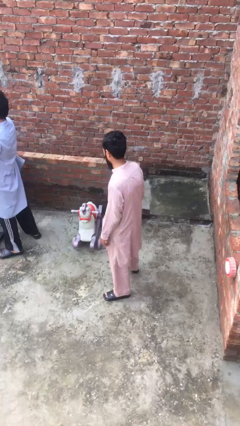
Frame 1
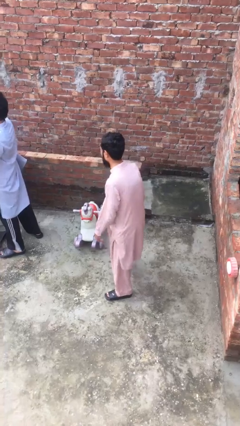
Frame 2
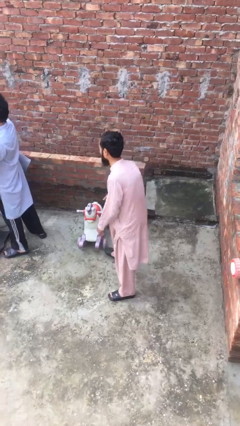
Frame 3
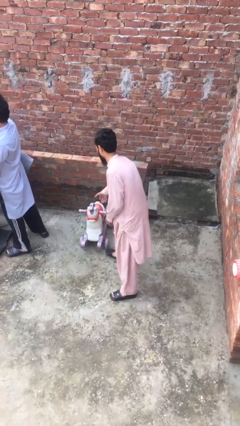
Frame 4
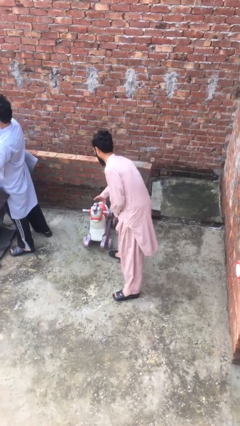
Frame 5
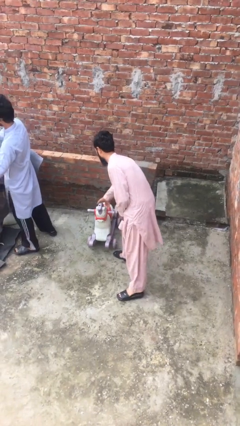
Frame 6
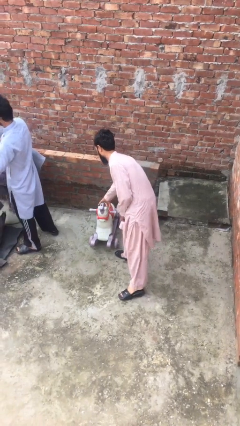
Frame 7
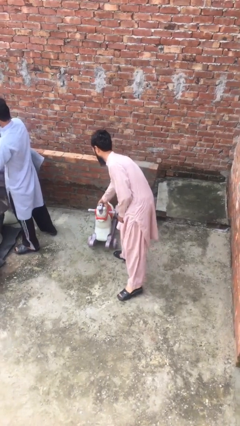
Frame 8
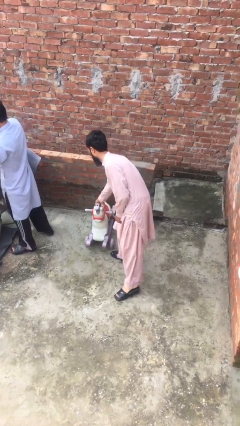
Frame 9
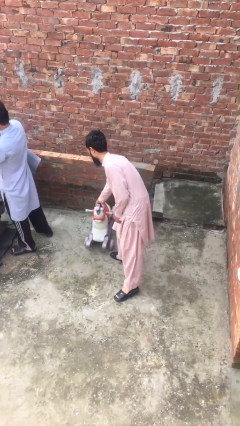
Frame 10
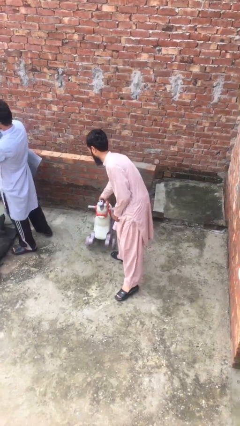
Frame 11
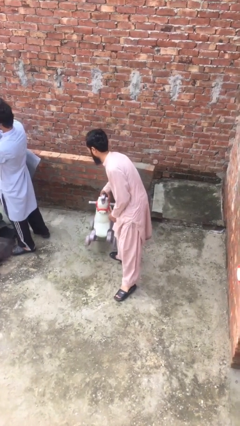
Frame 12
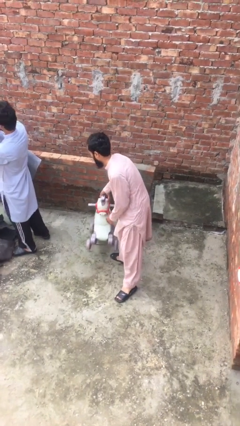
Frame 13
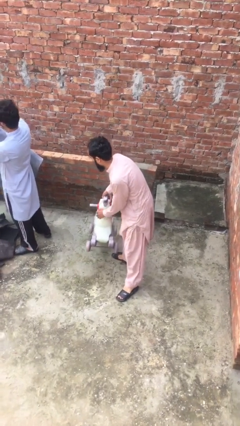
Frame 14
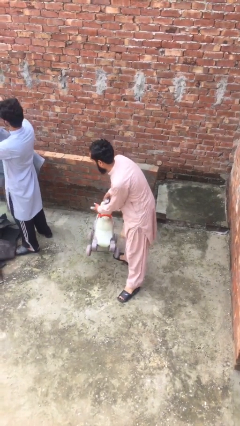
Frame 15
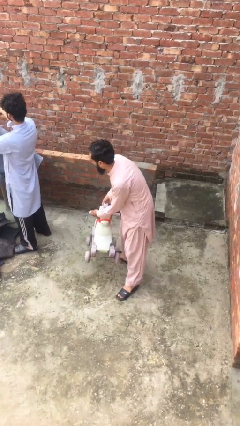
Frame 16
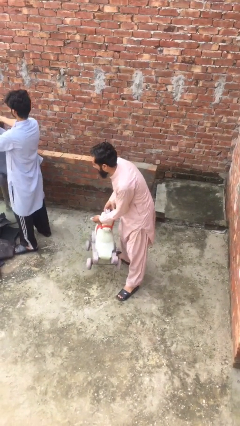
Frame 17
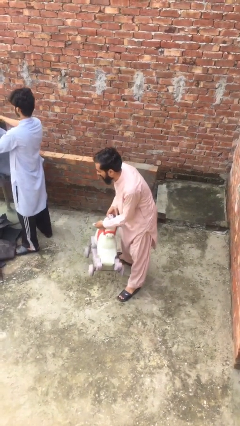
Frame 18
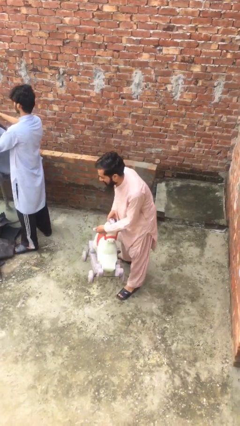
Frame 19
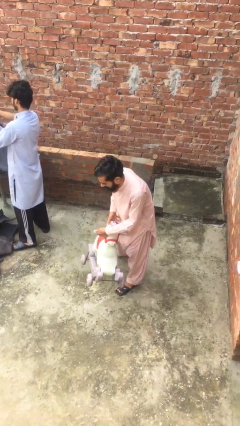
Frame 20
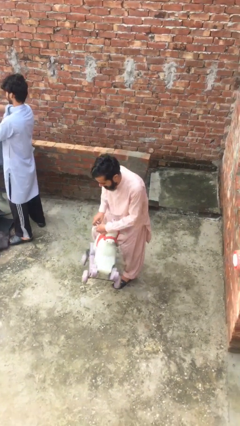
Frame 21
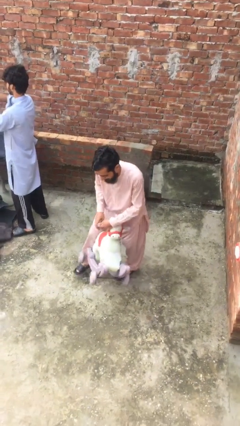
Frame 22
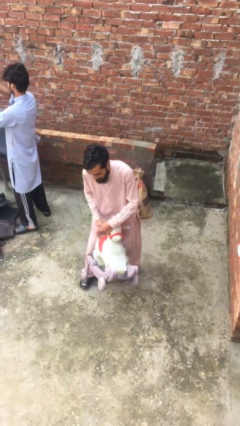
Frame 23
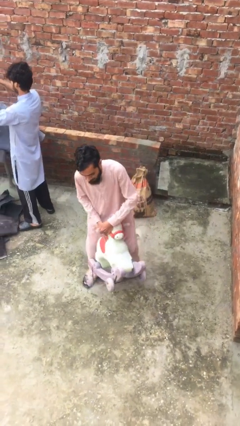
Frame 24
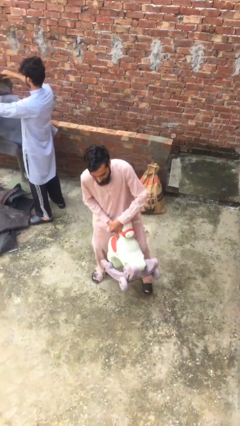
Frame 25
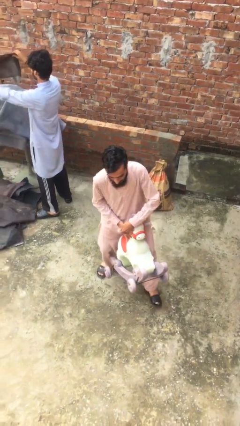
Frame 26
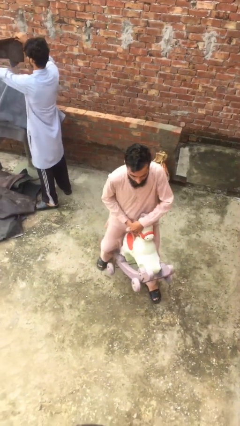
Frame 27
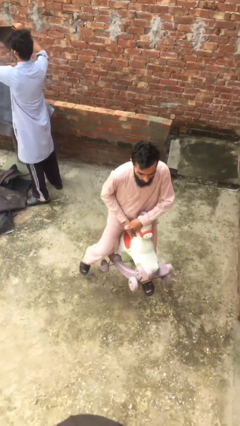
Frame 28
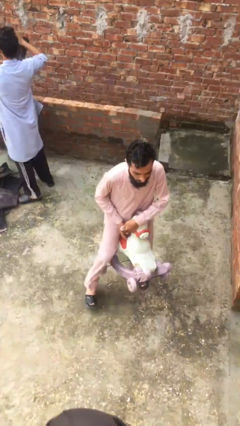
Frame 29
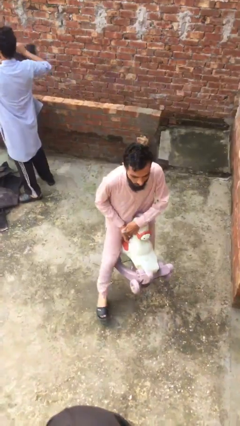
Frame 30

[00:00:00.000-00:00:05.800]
person steals object from person

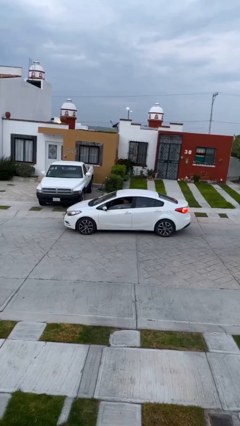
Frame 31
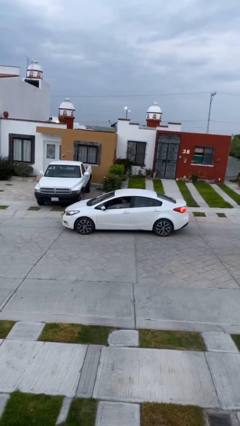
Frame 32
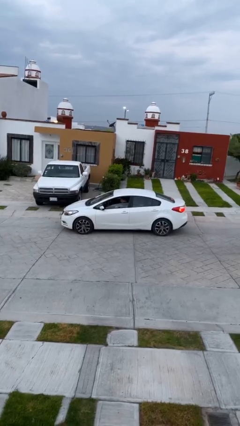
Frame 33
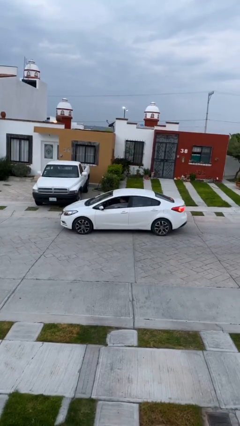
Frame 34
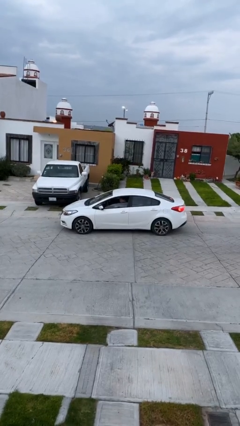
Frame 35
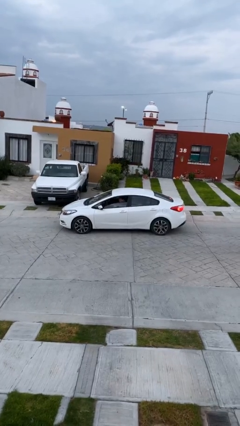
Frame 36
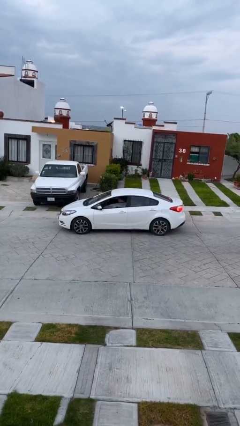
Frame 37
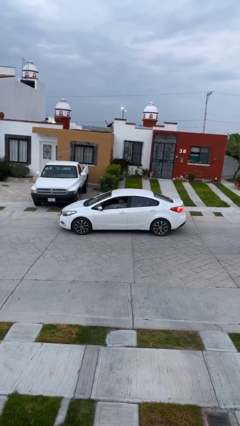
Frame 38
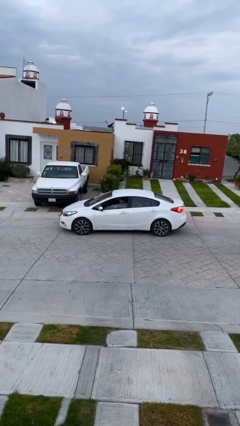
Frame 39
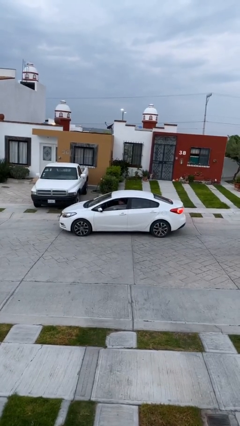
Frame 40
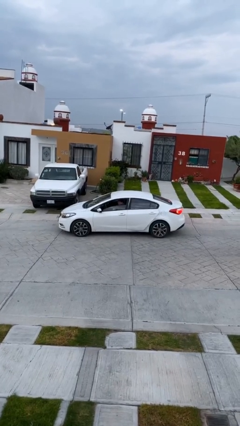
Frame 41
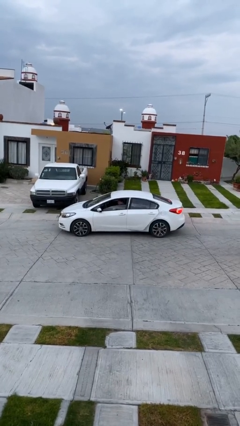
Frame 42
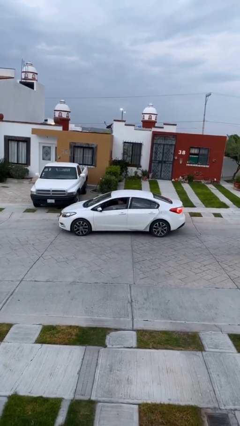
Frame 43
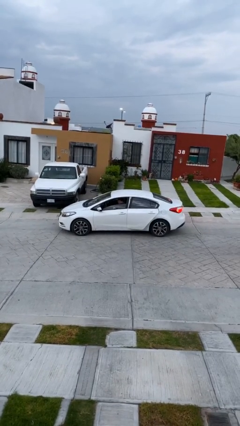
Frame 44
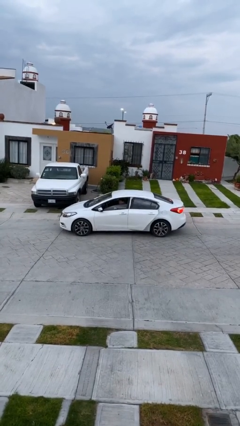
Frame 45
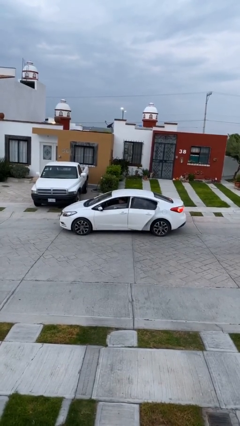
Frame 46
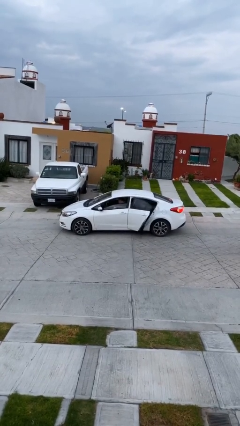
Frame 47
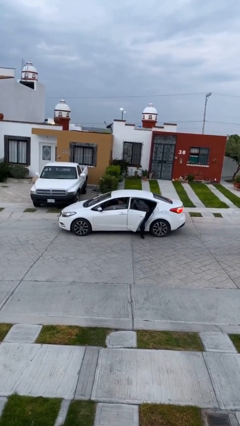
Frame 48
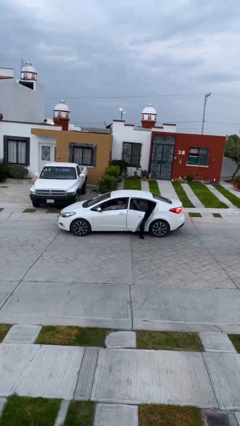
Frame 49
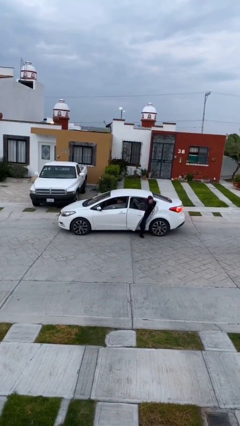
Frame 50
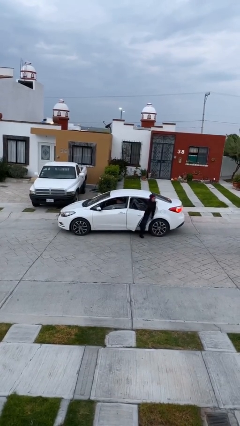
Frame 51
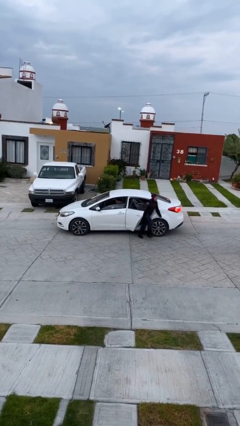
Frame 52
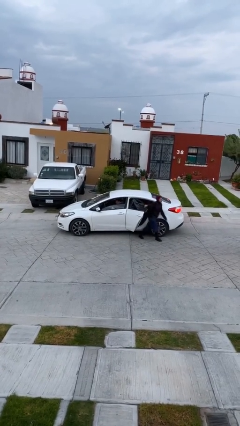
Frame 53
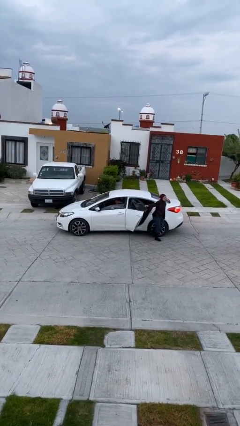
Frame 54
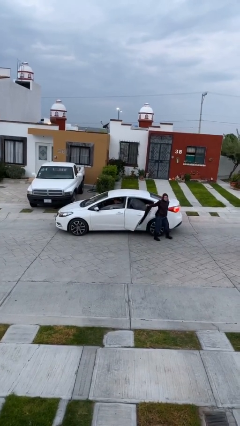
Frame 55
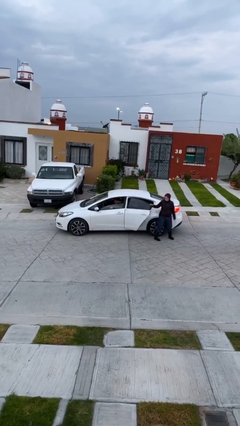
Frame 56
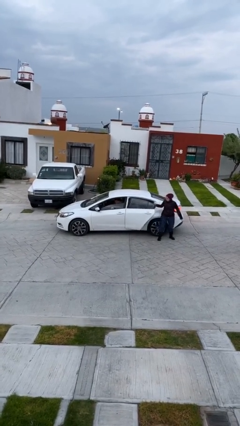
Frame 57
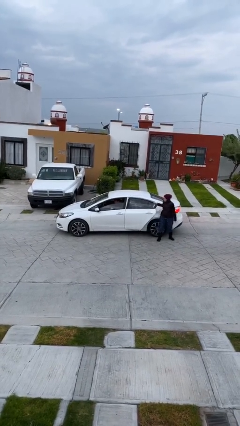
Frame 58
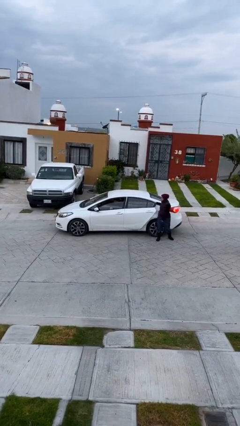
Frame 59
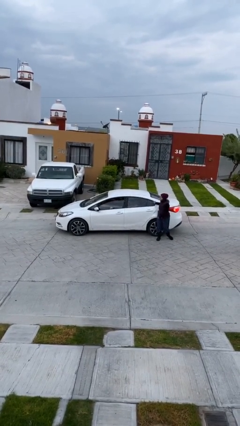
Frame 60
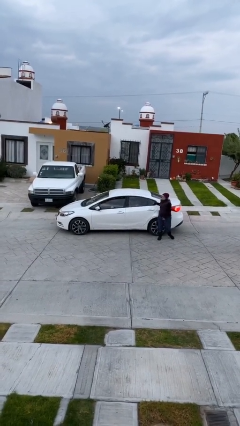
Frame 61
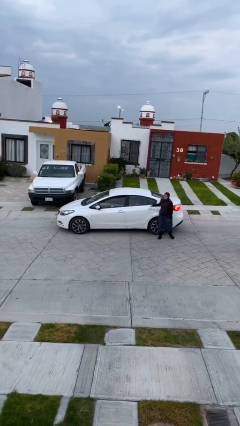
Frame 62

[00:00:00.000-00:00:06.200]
car drops off person

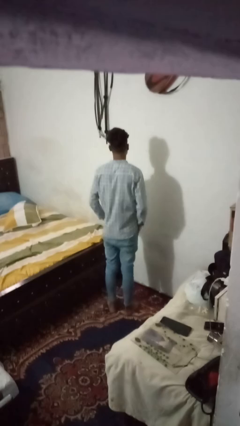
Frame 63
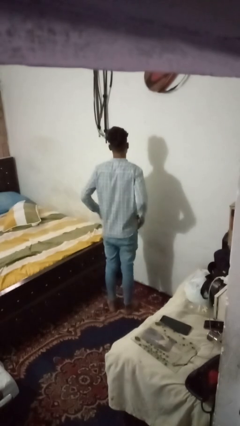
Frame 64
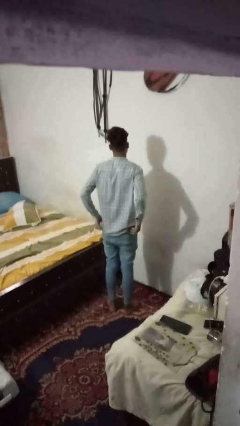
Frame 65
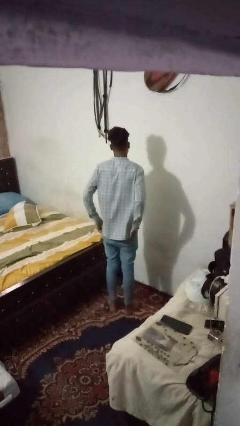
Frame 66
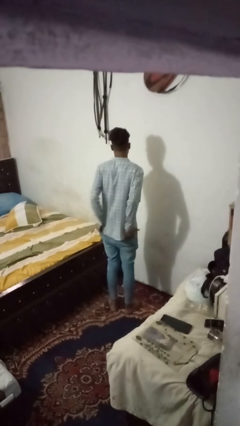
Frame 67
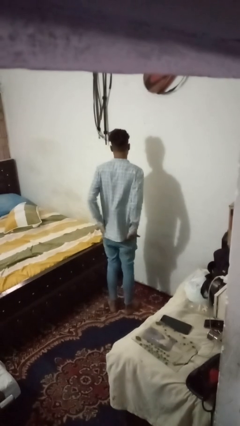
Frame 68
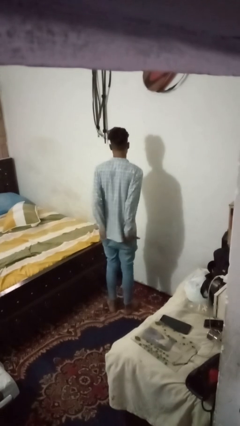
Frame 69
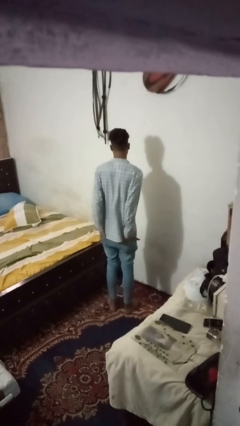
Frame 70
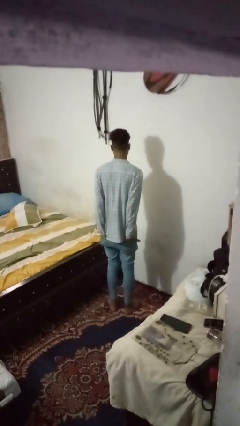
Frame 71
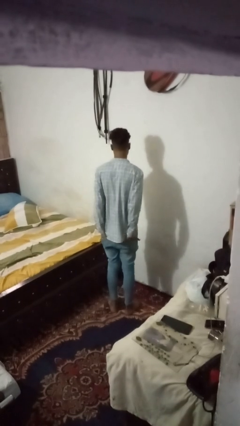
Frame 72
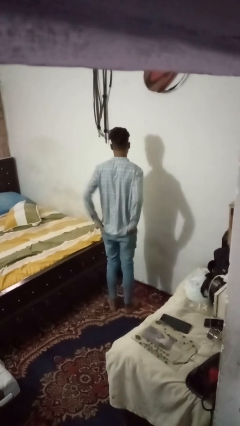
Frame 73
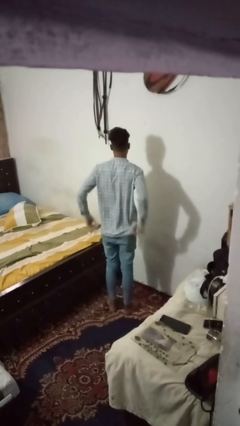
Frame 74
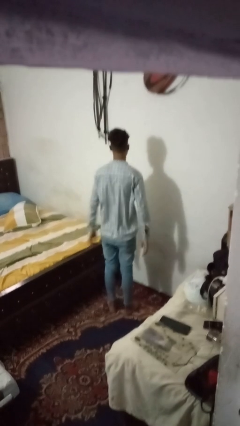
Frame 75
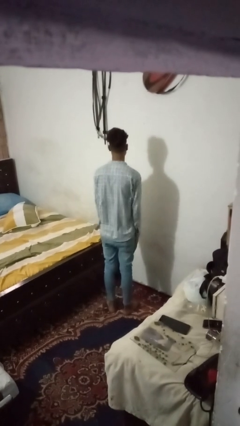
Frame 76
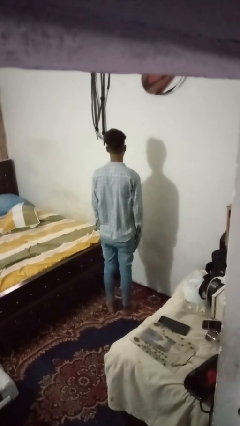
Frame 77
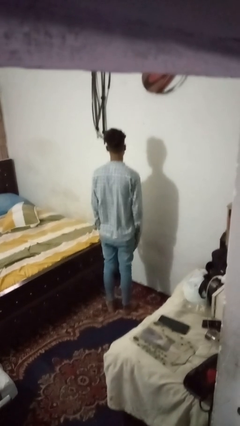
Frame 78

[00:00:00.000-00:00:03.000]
person puts hands in back pockets

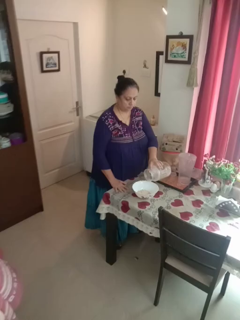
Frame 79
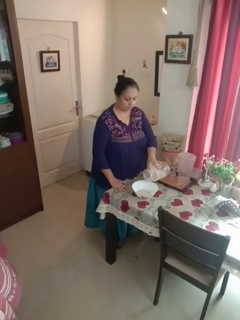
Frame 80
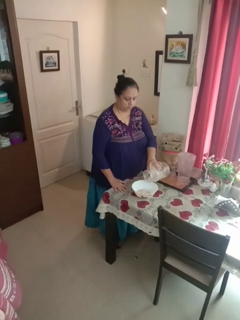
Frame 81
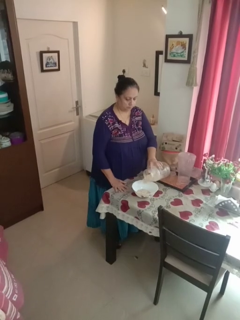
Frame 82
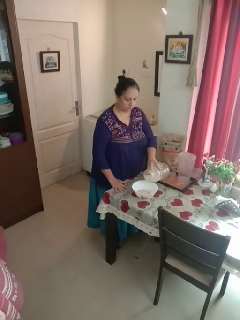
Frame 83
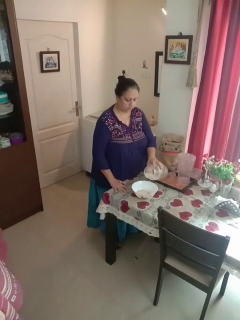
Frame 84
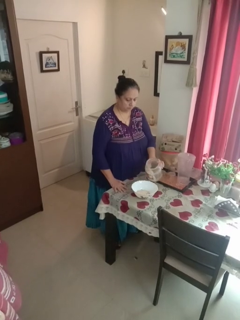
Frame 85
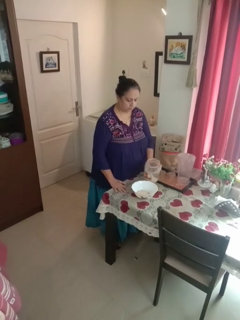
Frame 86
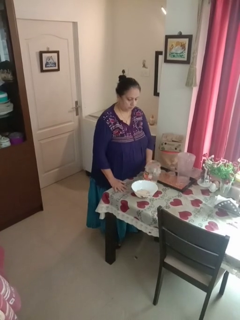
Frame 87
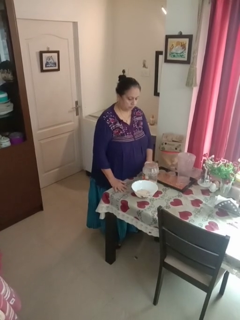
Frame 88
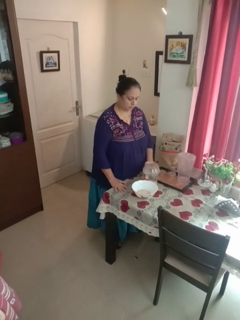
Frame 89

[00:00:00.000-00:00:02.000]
person pours into bowl

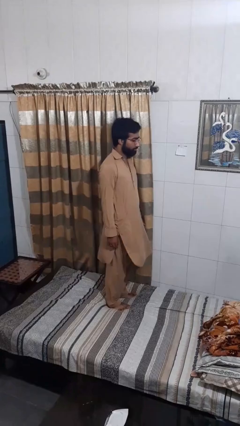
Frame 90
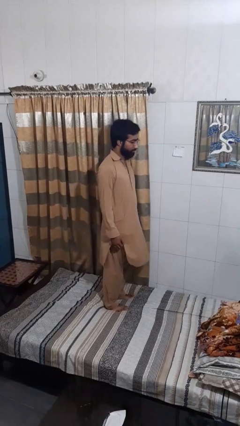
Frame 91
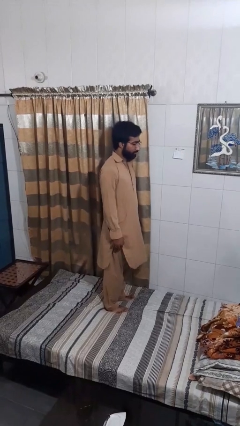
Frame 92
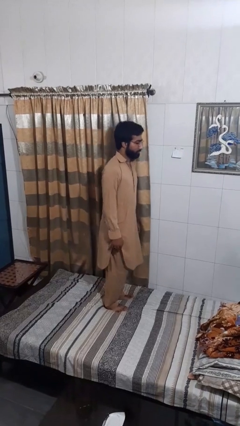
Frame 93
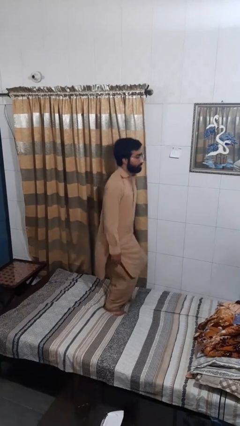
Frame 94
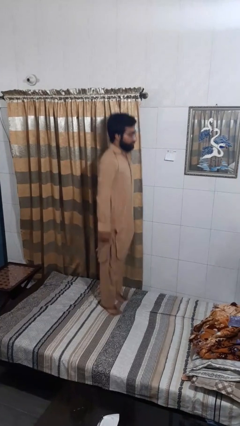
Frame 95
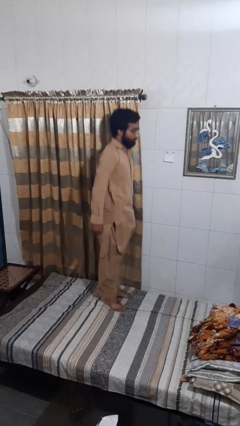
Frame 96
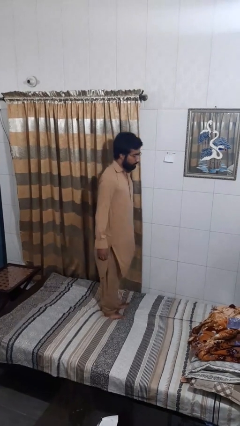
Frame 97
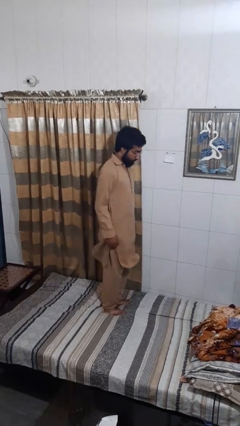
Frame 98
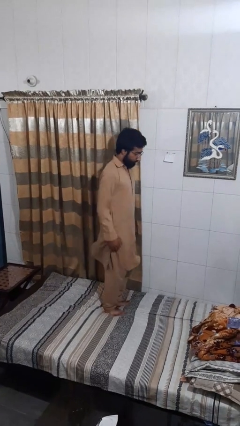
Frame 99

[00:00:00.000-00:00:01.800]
person jumps on bed
